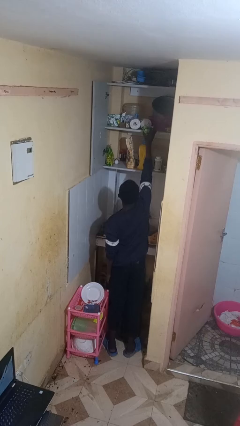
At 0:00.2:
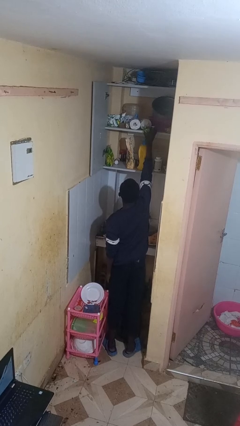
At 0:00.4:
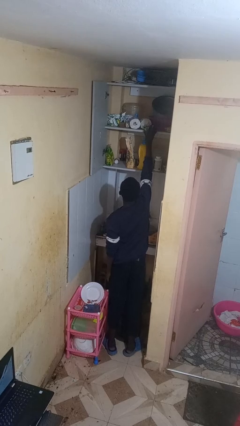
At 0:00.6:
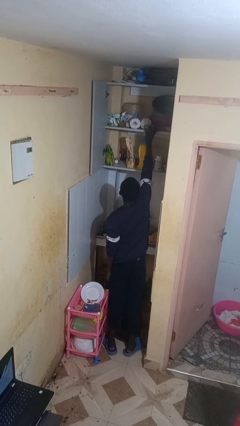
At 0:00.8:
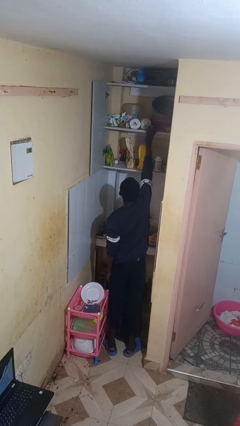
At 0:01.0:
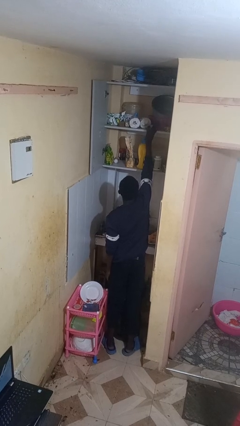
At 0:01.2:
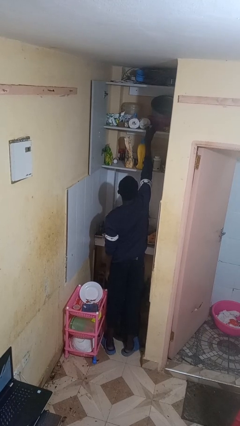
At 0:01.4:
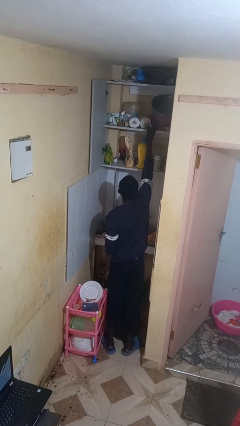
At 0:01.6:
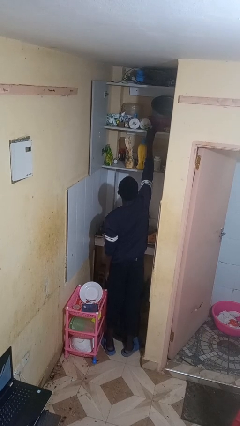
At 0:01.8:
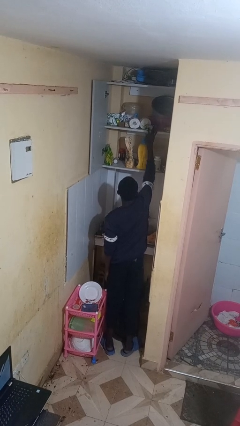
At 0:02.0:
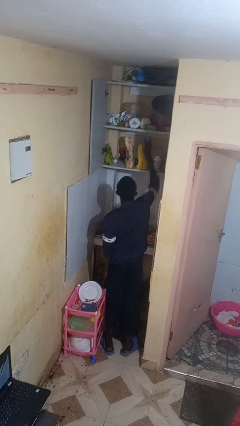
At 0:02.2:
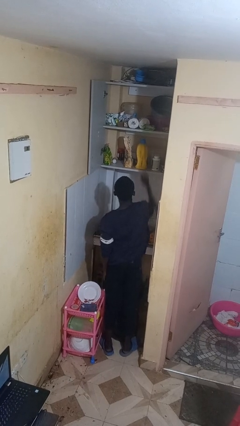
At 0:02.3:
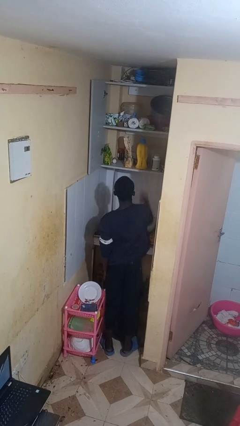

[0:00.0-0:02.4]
person puts object in cabinet

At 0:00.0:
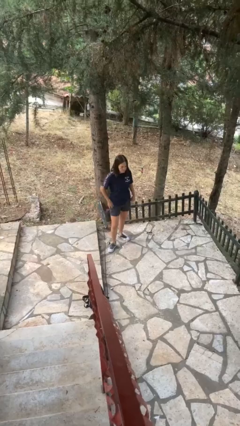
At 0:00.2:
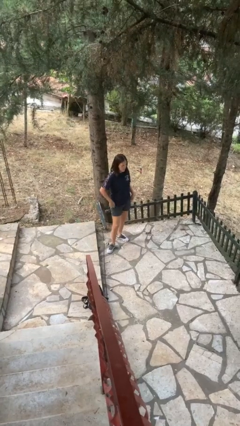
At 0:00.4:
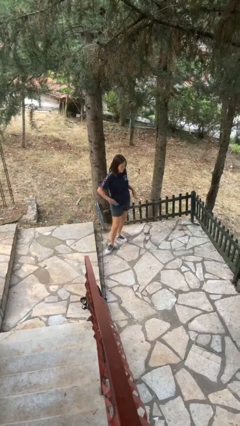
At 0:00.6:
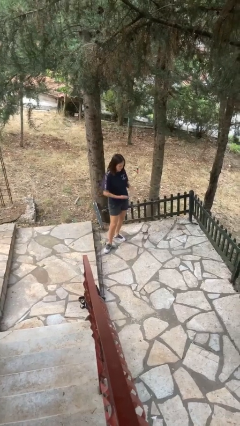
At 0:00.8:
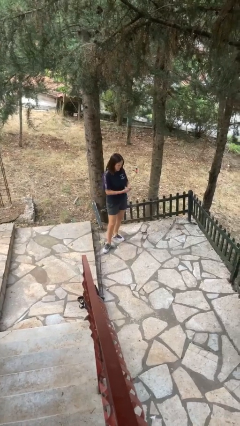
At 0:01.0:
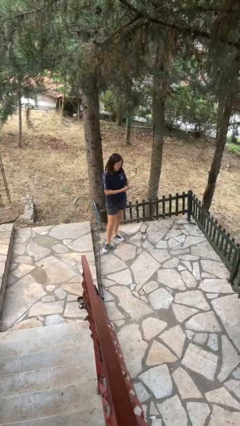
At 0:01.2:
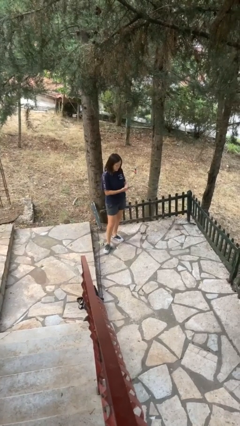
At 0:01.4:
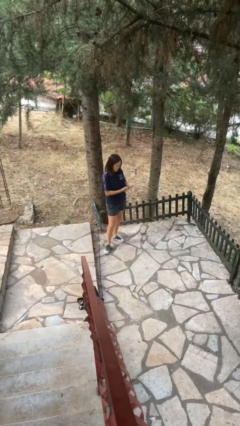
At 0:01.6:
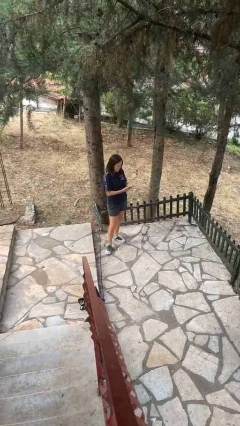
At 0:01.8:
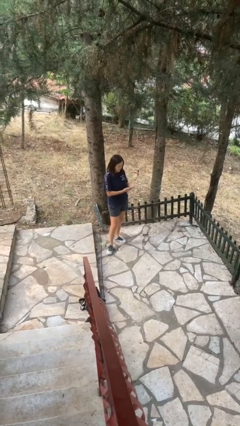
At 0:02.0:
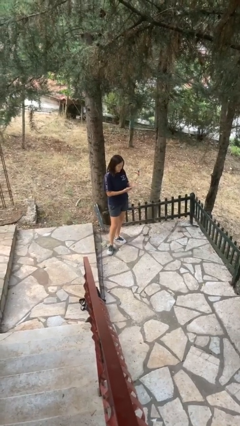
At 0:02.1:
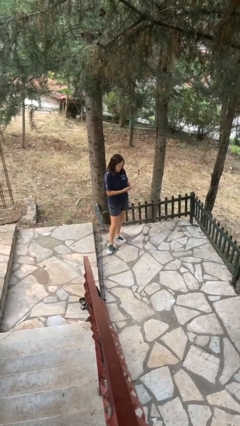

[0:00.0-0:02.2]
person takes phone from pocket

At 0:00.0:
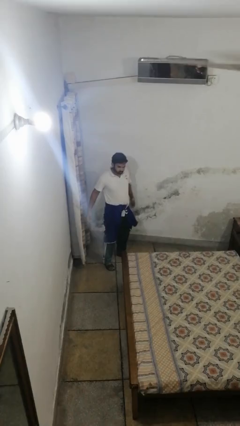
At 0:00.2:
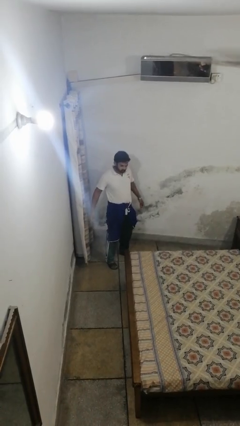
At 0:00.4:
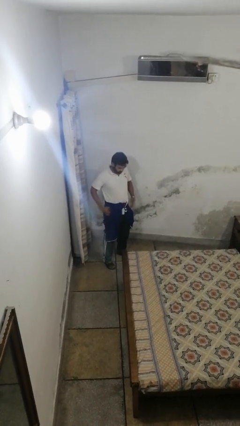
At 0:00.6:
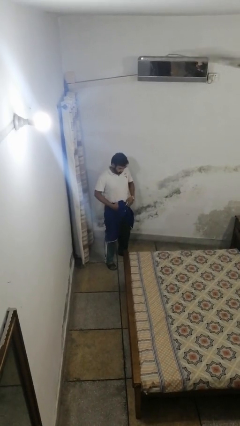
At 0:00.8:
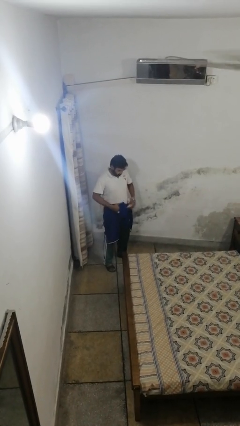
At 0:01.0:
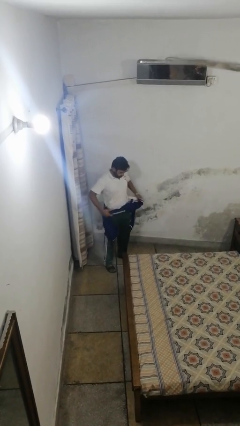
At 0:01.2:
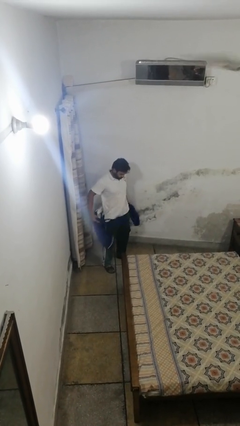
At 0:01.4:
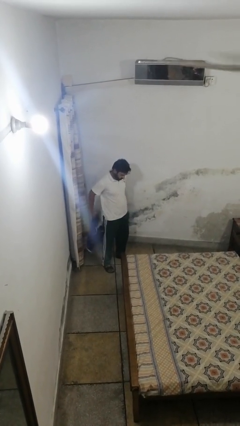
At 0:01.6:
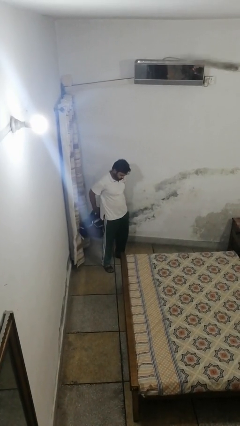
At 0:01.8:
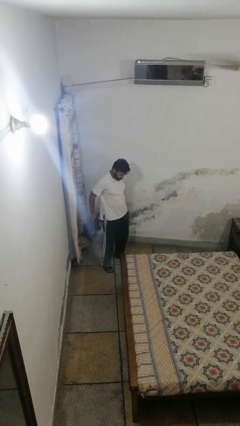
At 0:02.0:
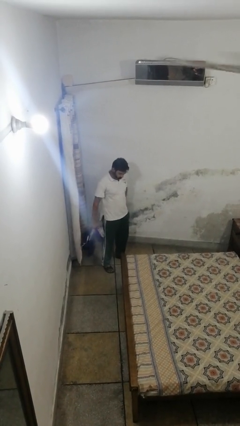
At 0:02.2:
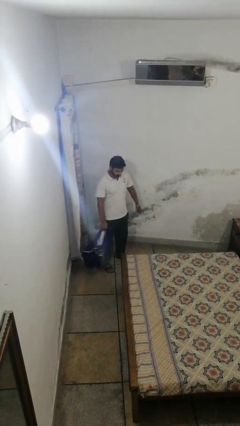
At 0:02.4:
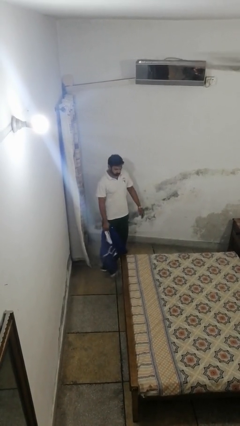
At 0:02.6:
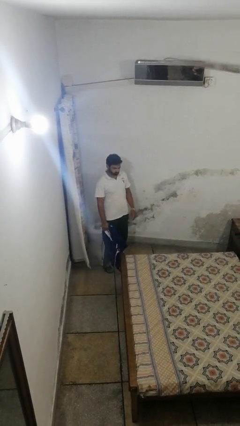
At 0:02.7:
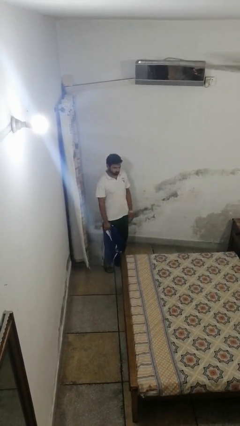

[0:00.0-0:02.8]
person unties jacket around waist

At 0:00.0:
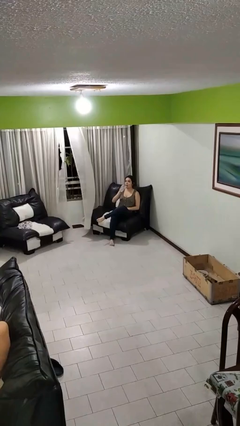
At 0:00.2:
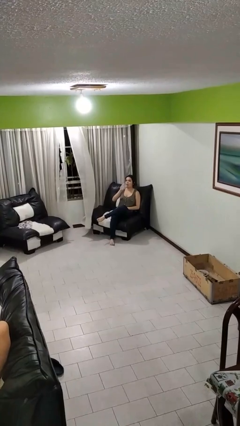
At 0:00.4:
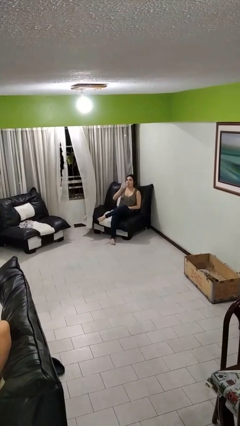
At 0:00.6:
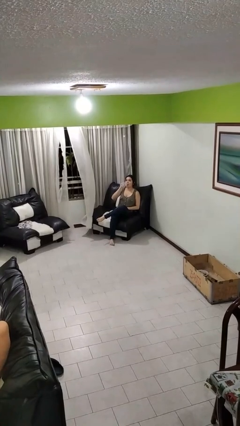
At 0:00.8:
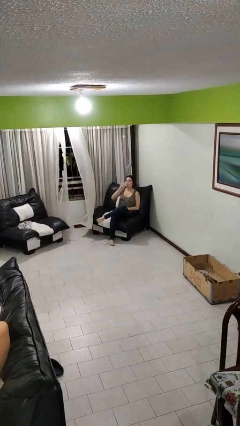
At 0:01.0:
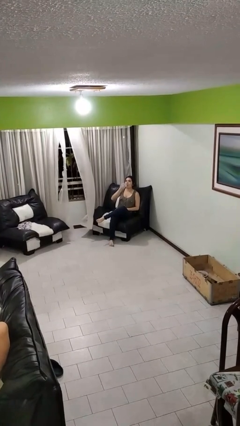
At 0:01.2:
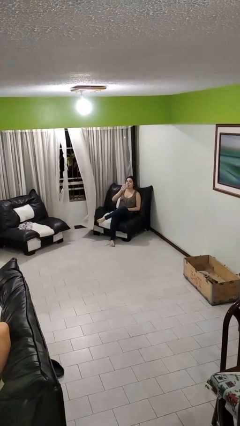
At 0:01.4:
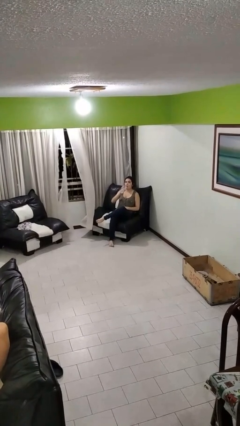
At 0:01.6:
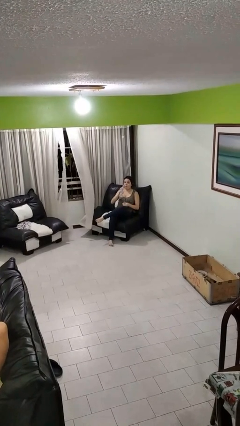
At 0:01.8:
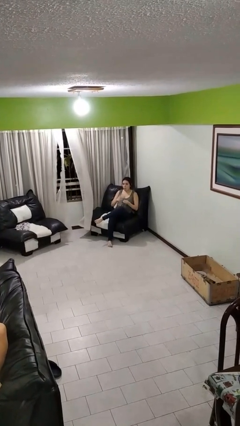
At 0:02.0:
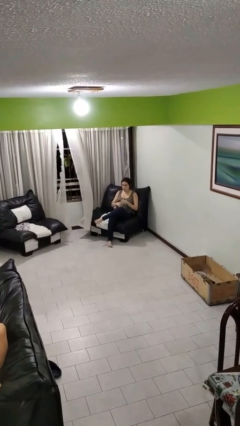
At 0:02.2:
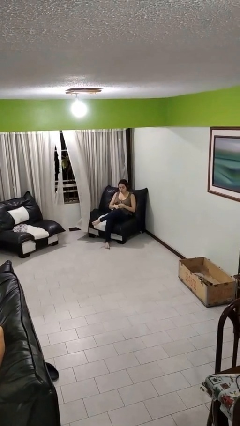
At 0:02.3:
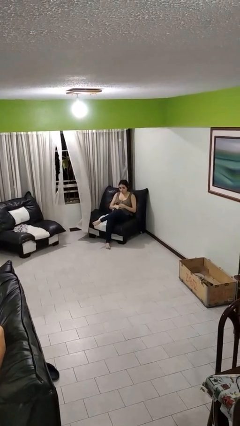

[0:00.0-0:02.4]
person drinks from bottle

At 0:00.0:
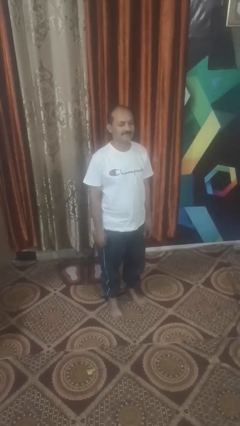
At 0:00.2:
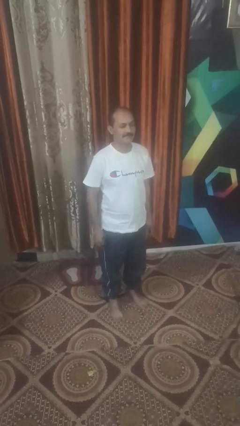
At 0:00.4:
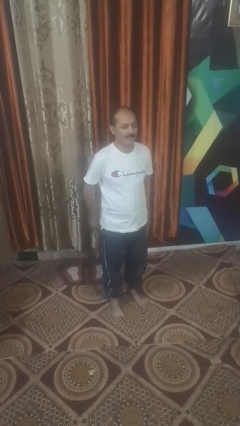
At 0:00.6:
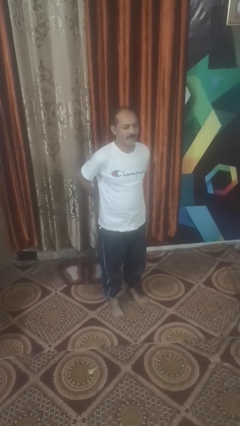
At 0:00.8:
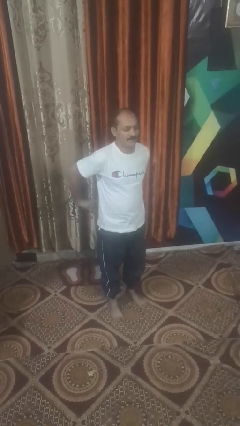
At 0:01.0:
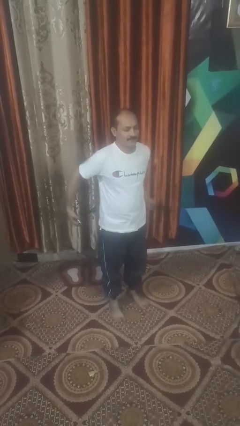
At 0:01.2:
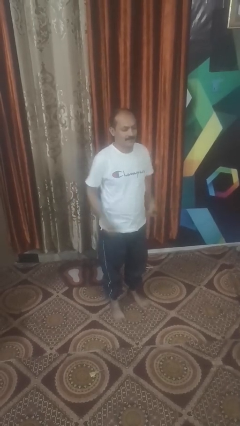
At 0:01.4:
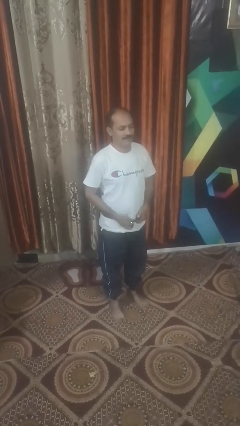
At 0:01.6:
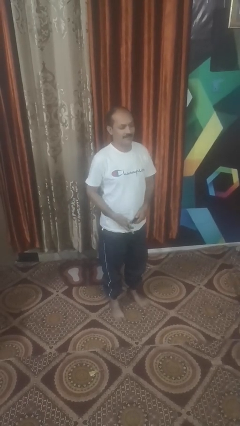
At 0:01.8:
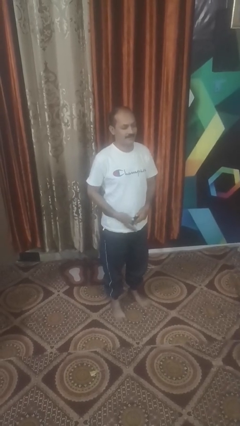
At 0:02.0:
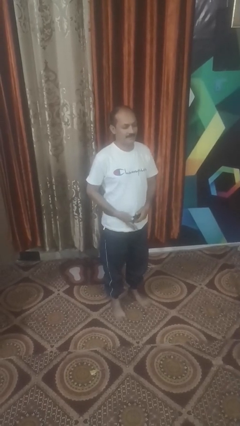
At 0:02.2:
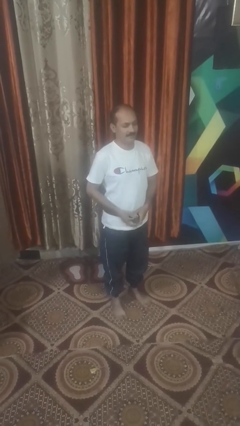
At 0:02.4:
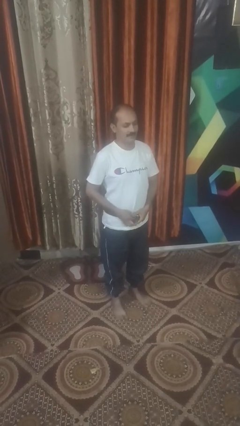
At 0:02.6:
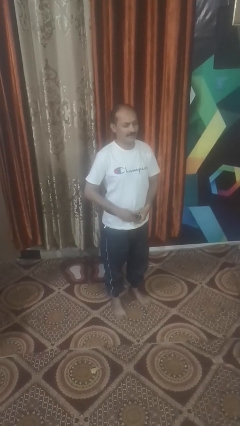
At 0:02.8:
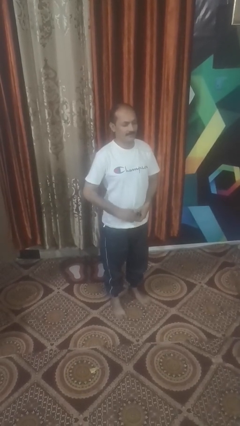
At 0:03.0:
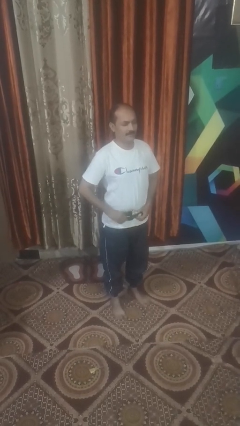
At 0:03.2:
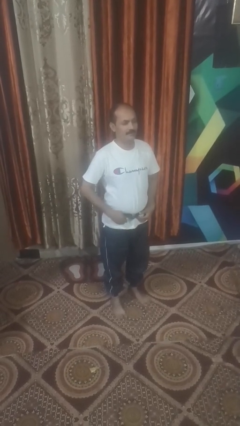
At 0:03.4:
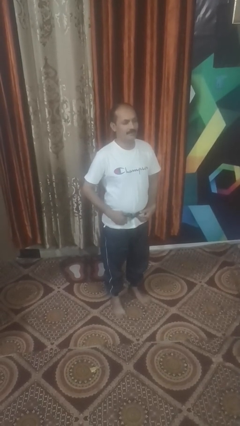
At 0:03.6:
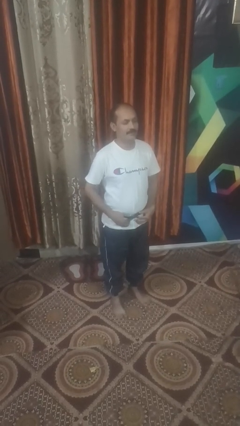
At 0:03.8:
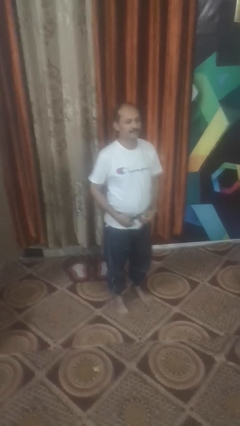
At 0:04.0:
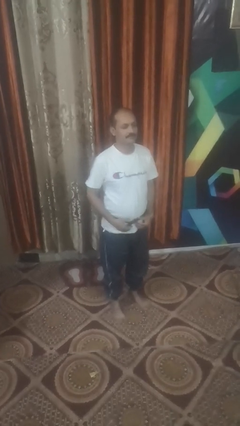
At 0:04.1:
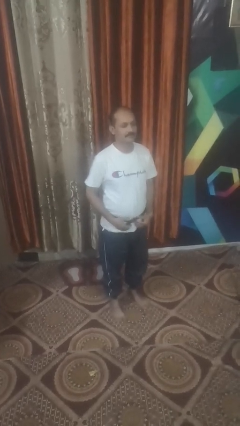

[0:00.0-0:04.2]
person puts on belt

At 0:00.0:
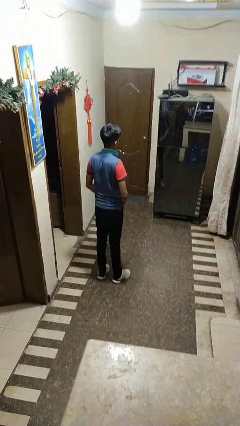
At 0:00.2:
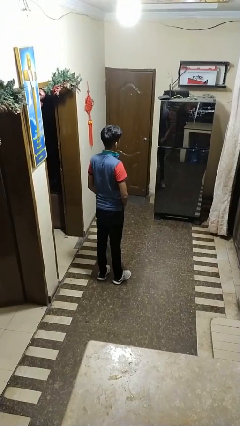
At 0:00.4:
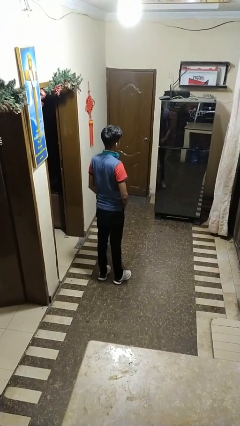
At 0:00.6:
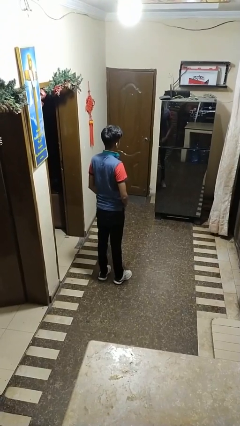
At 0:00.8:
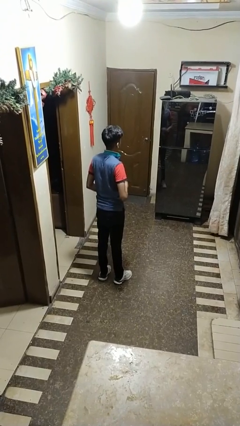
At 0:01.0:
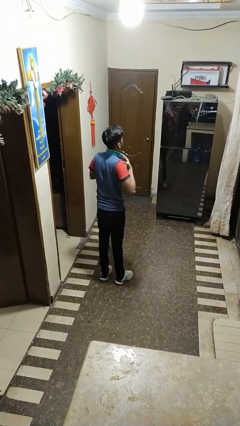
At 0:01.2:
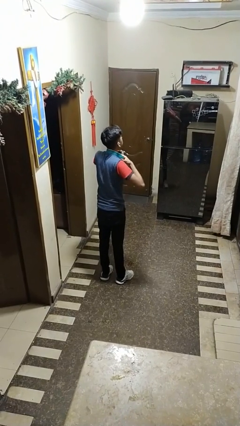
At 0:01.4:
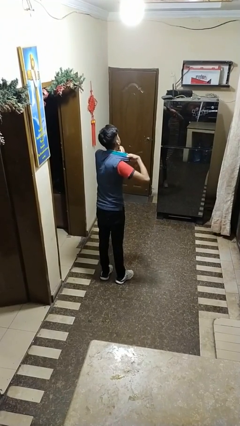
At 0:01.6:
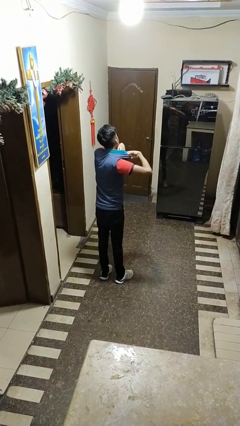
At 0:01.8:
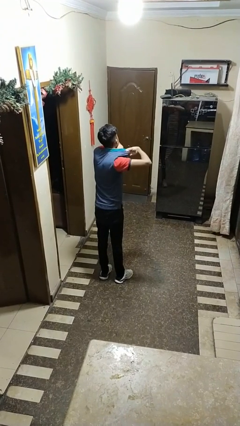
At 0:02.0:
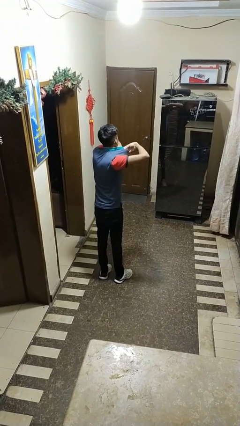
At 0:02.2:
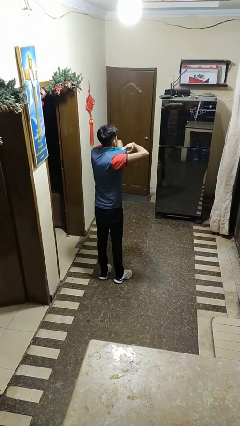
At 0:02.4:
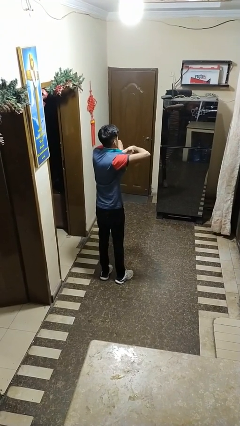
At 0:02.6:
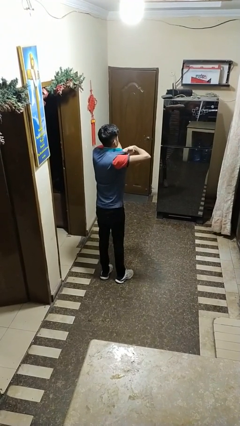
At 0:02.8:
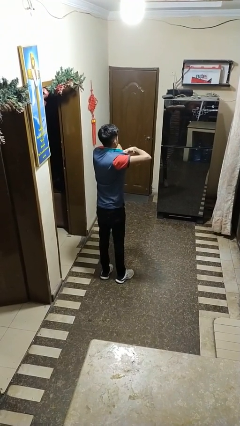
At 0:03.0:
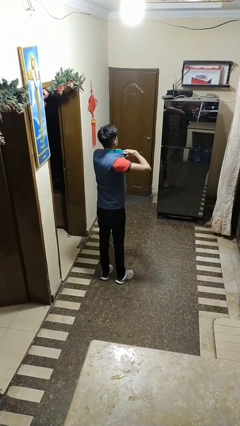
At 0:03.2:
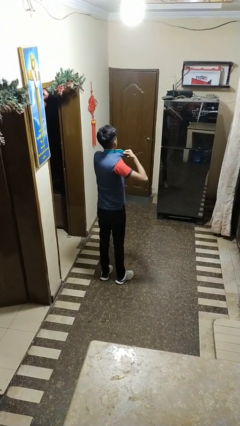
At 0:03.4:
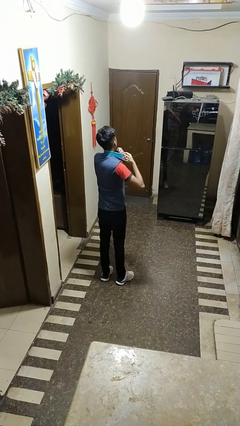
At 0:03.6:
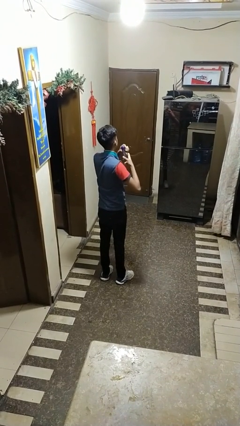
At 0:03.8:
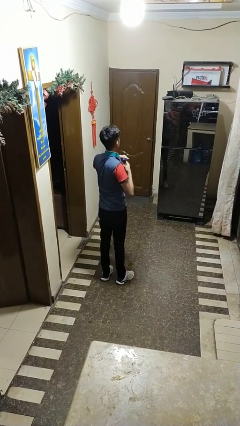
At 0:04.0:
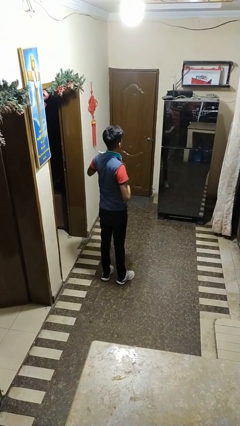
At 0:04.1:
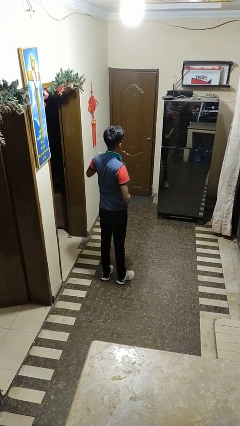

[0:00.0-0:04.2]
person applies deodorant
